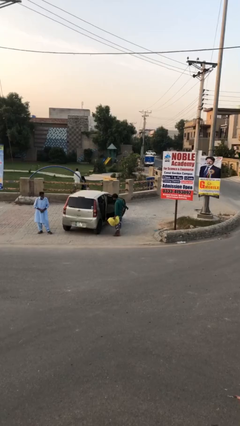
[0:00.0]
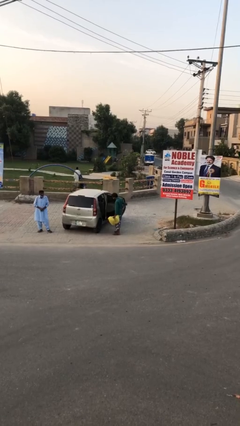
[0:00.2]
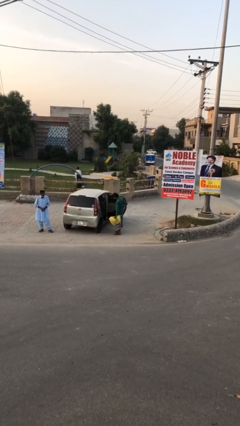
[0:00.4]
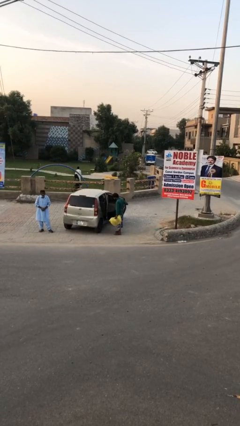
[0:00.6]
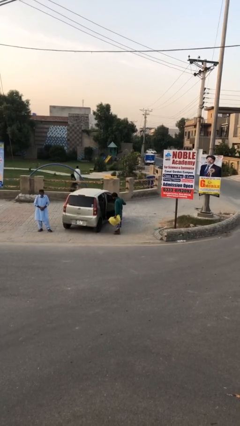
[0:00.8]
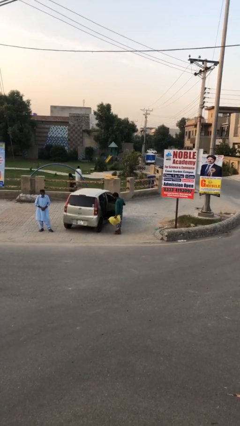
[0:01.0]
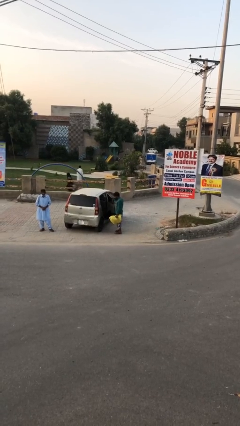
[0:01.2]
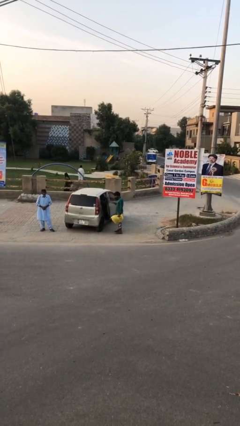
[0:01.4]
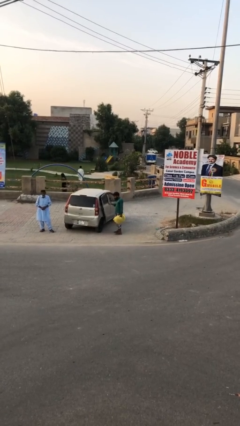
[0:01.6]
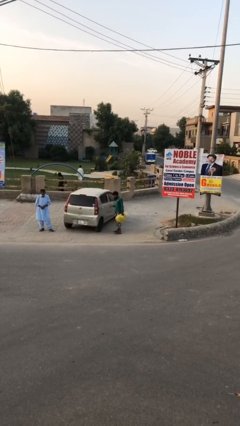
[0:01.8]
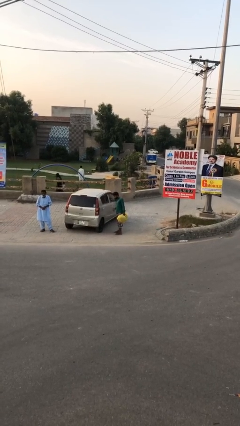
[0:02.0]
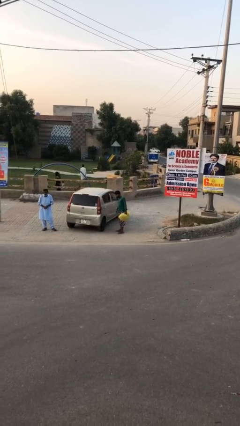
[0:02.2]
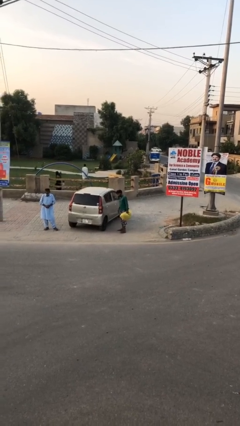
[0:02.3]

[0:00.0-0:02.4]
person closes car door

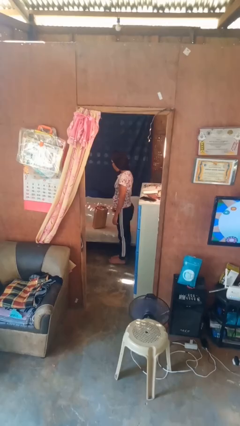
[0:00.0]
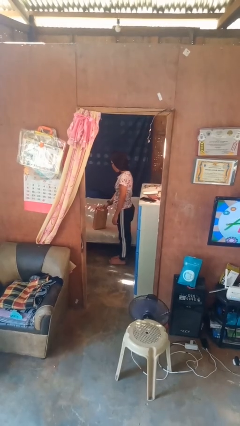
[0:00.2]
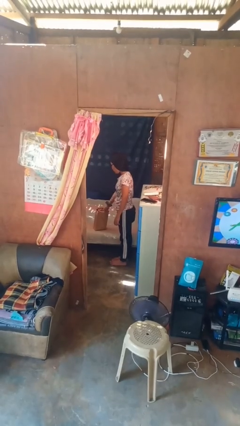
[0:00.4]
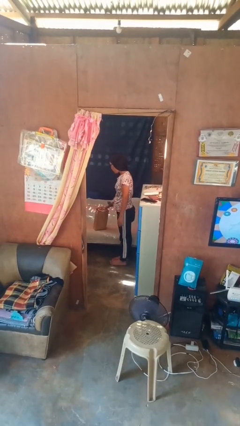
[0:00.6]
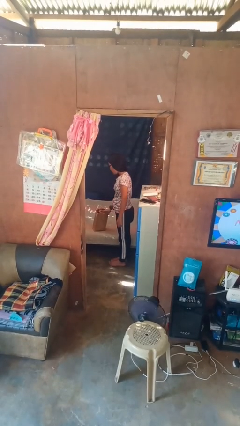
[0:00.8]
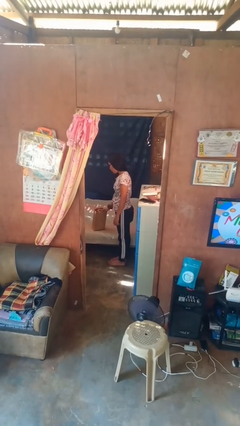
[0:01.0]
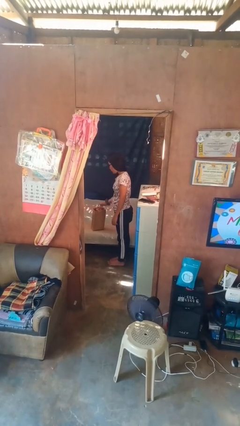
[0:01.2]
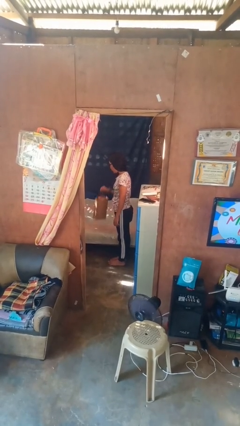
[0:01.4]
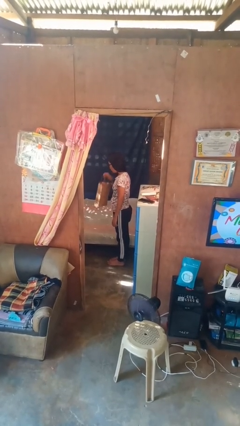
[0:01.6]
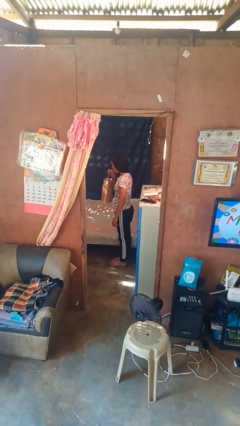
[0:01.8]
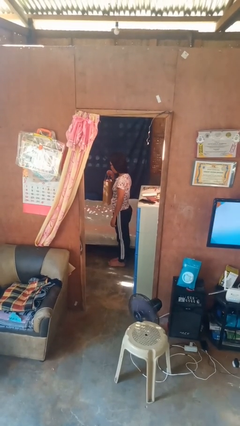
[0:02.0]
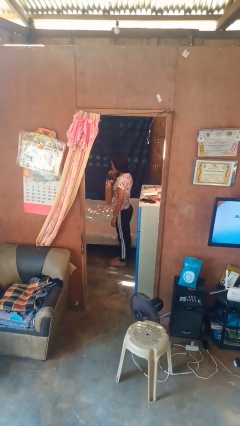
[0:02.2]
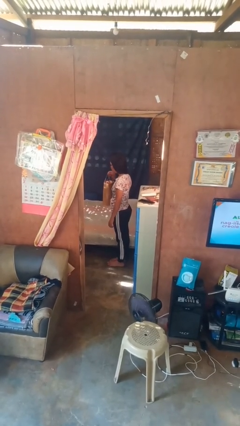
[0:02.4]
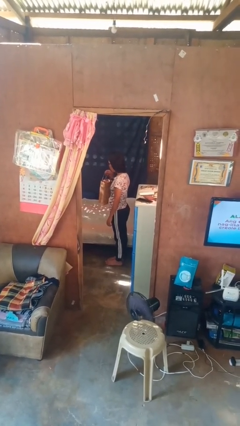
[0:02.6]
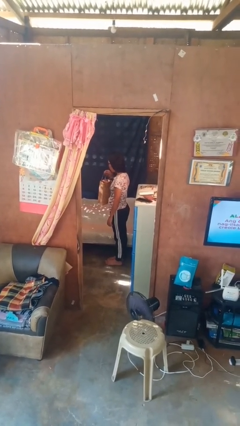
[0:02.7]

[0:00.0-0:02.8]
person picks up object from bed

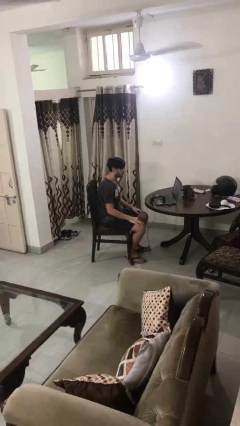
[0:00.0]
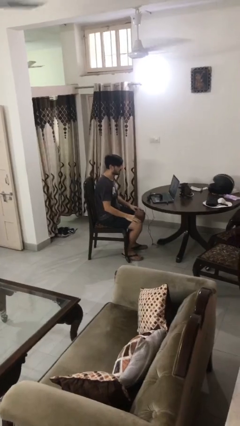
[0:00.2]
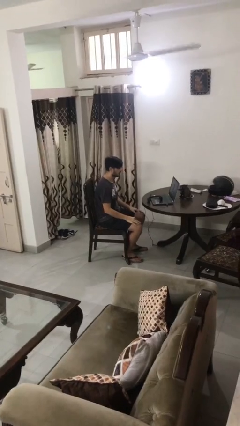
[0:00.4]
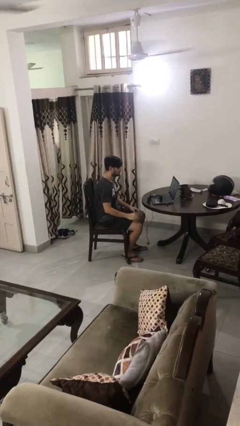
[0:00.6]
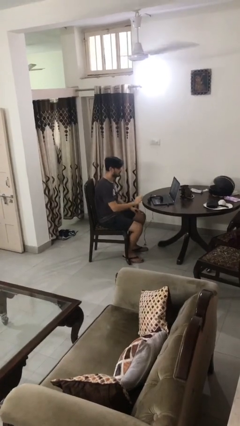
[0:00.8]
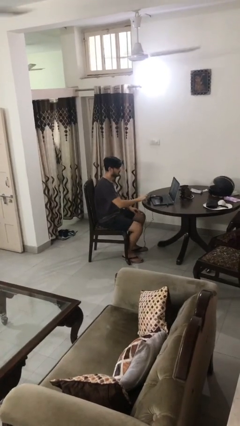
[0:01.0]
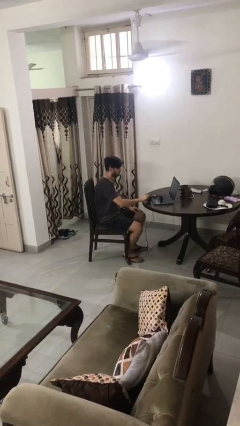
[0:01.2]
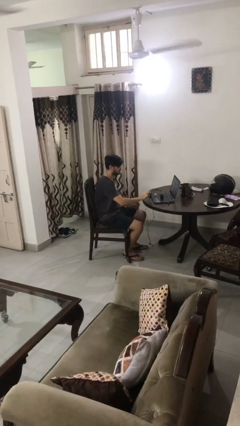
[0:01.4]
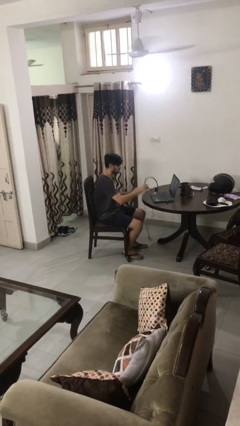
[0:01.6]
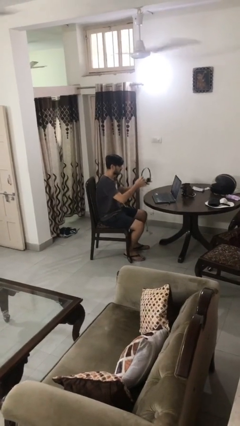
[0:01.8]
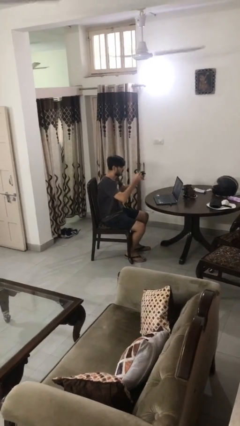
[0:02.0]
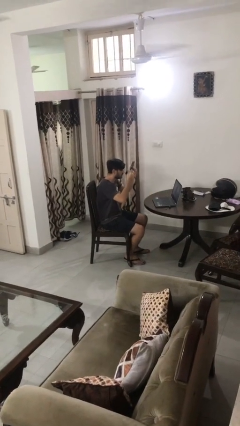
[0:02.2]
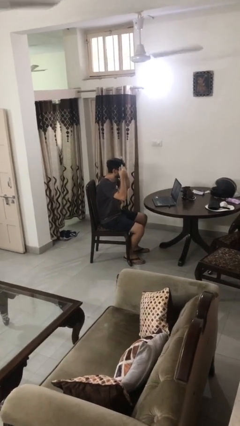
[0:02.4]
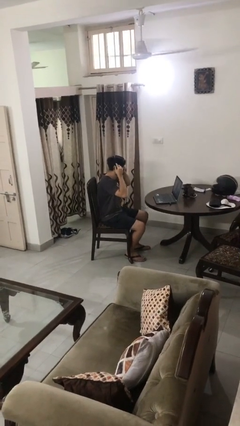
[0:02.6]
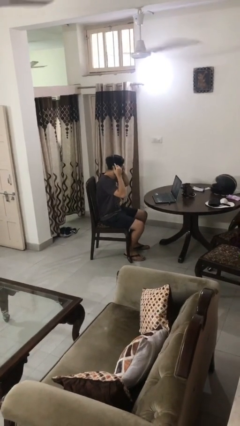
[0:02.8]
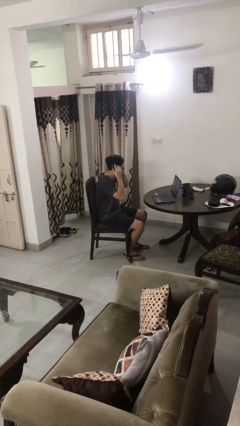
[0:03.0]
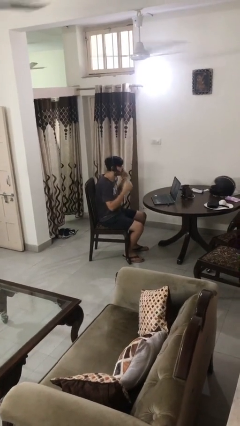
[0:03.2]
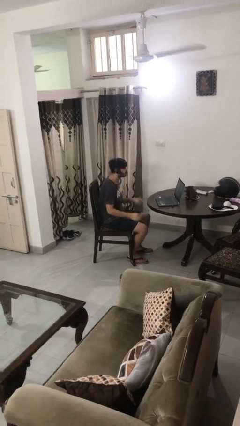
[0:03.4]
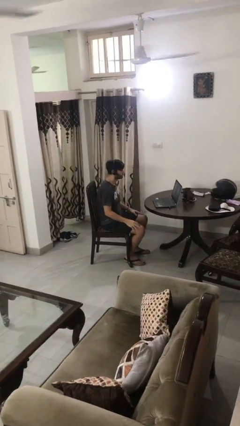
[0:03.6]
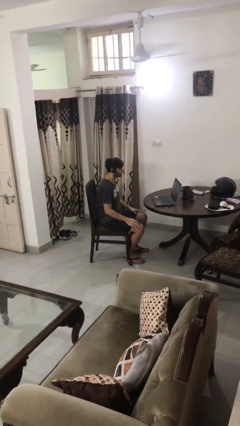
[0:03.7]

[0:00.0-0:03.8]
person puts on headphones

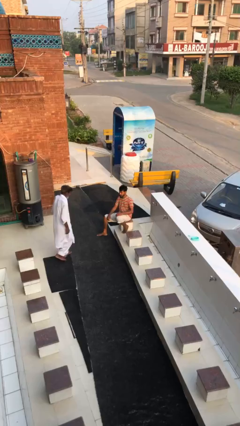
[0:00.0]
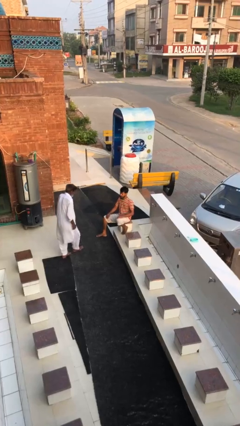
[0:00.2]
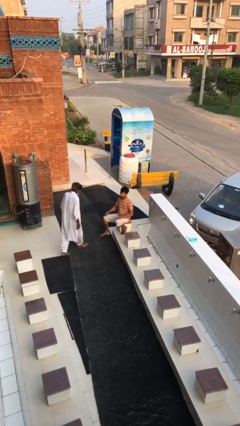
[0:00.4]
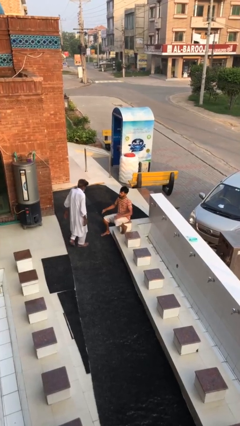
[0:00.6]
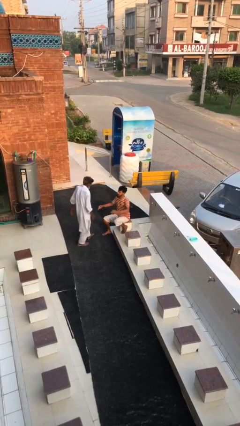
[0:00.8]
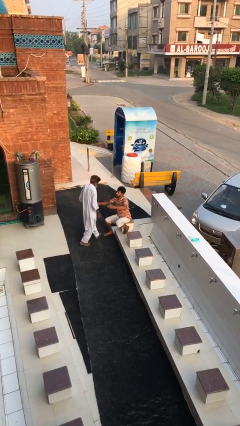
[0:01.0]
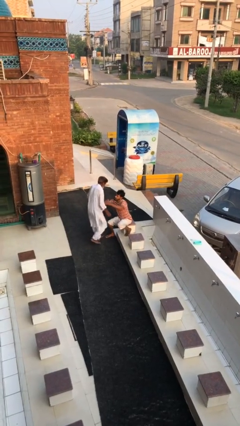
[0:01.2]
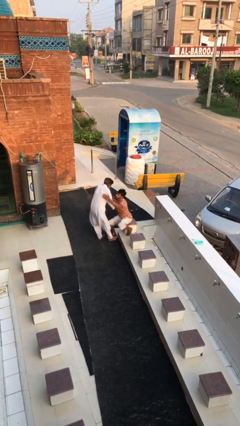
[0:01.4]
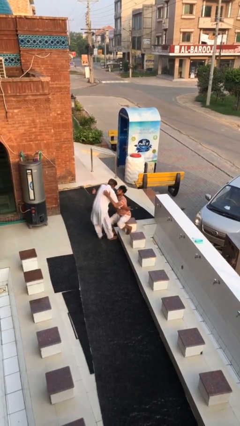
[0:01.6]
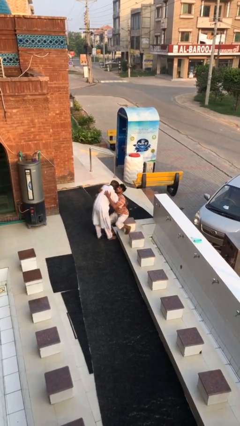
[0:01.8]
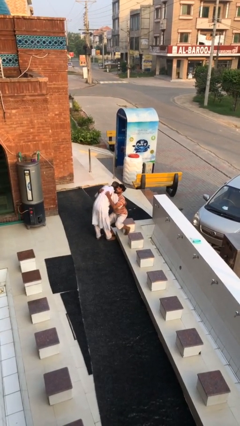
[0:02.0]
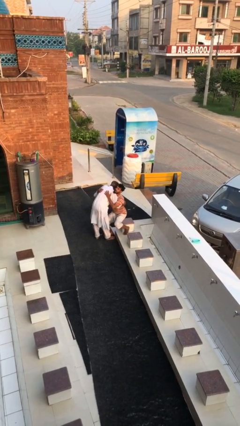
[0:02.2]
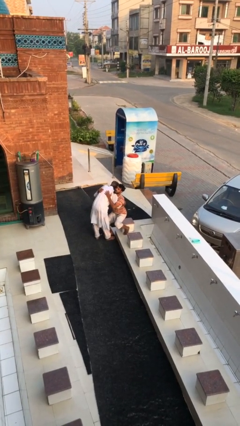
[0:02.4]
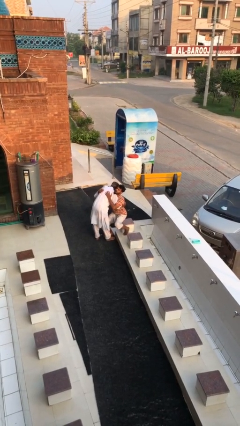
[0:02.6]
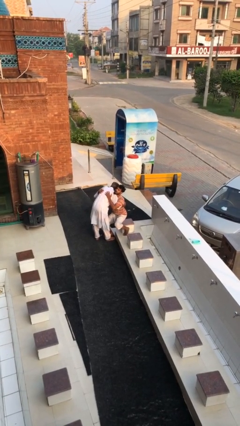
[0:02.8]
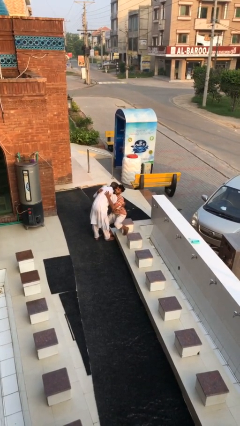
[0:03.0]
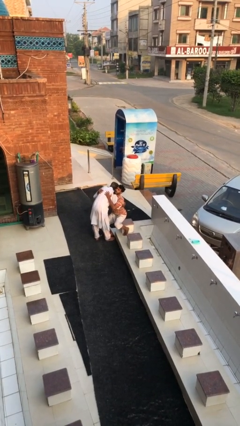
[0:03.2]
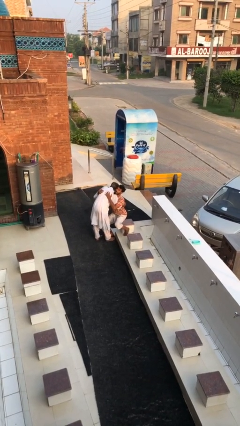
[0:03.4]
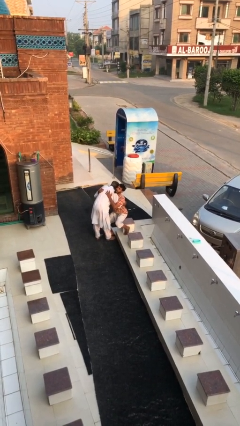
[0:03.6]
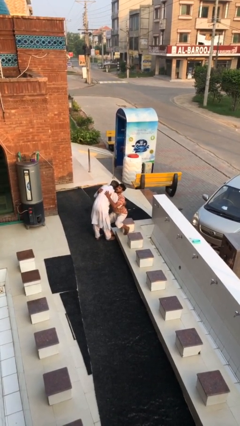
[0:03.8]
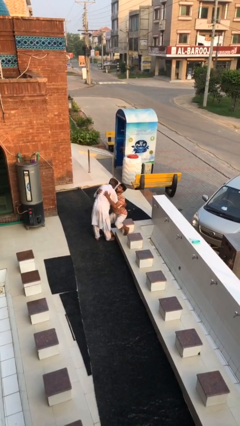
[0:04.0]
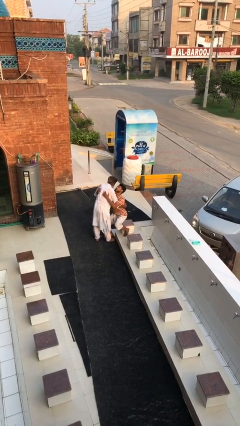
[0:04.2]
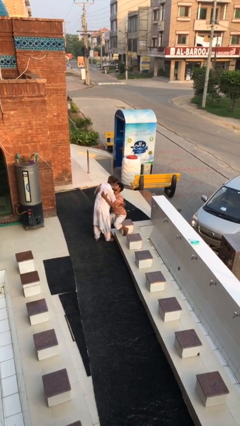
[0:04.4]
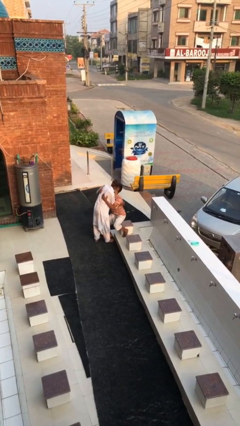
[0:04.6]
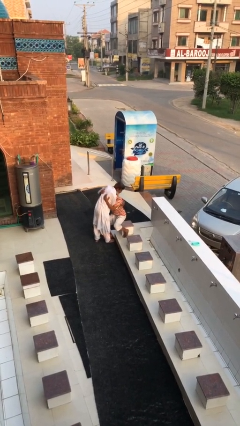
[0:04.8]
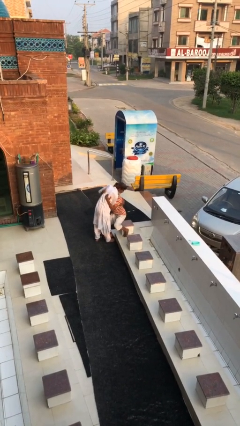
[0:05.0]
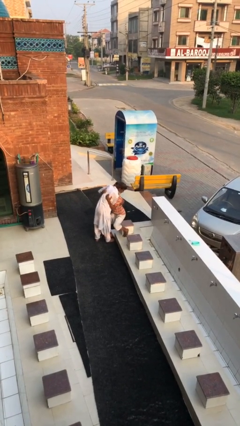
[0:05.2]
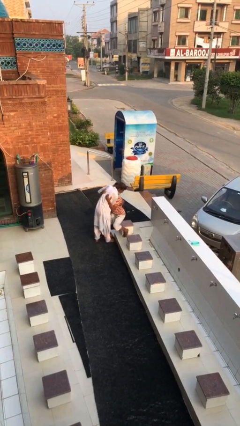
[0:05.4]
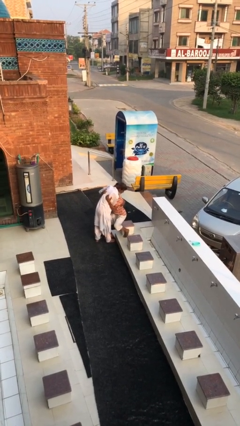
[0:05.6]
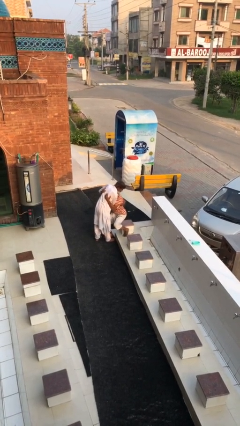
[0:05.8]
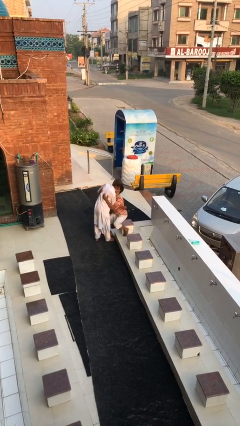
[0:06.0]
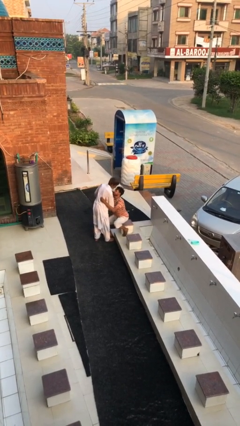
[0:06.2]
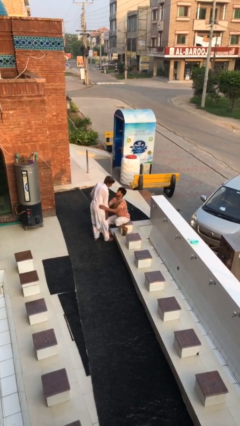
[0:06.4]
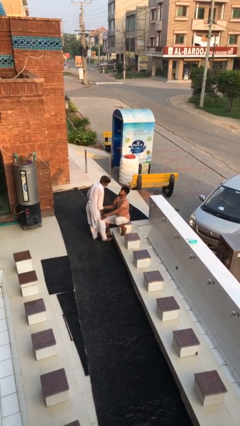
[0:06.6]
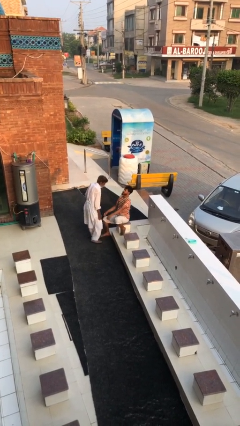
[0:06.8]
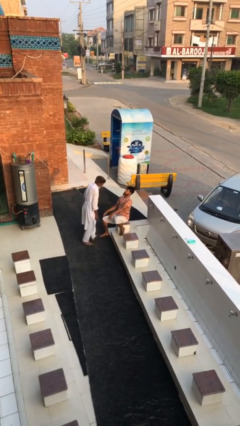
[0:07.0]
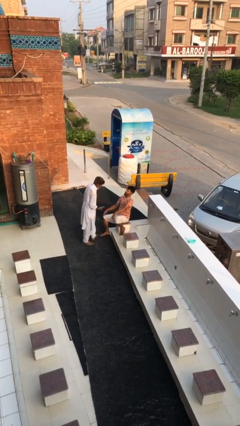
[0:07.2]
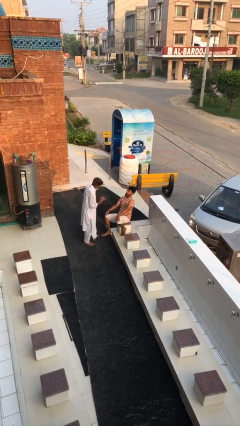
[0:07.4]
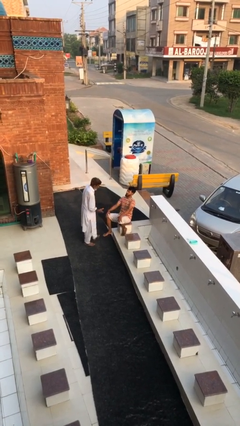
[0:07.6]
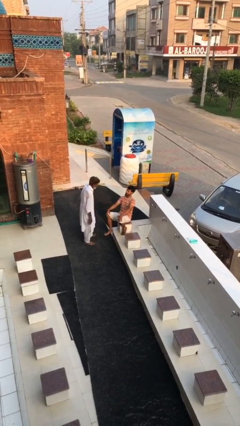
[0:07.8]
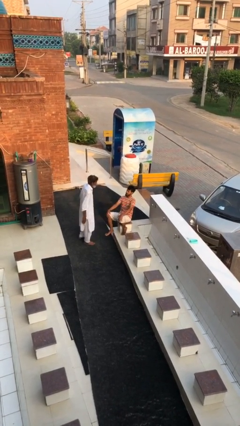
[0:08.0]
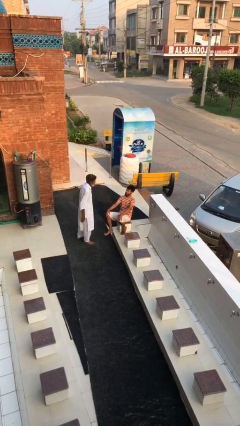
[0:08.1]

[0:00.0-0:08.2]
person embraces person

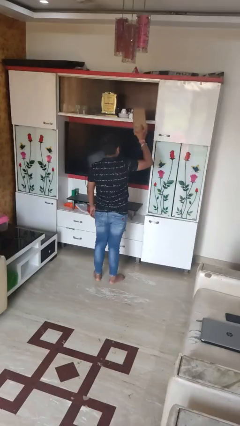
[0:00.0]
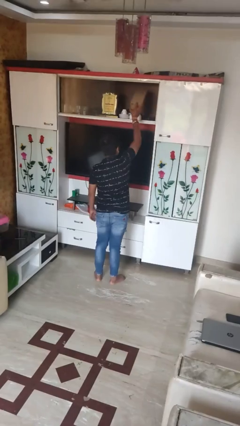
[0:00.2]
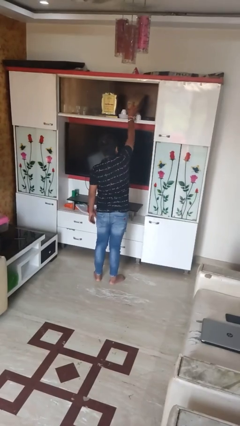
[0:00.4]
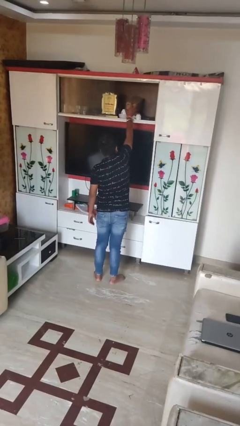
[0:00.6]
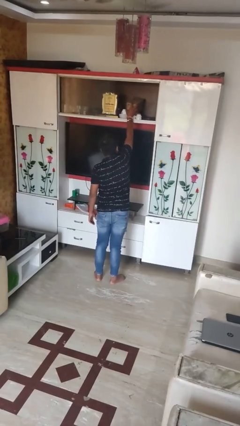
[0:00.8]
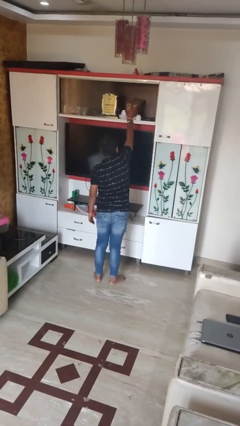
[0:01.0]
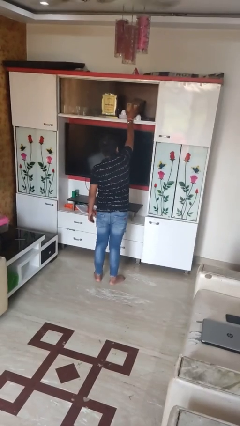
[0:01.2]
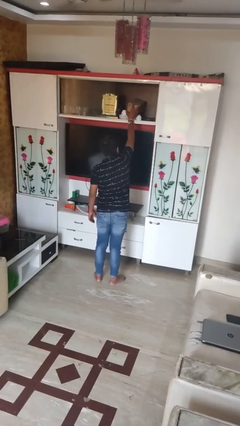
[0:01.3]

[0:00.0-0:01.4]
person puts down object on shelf
